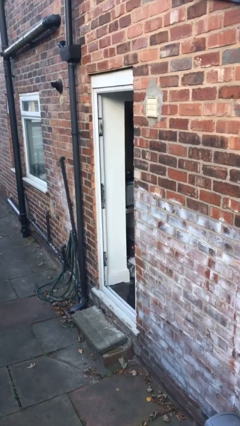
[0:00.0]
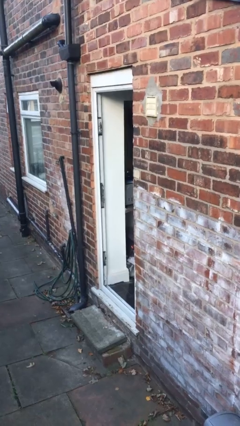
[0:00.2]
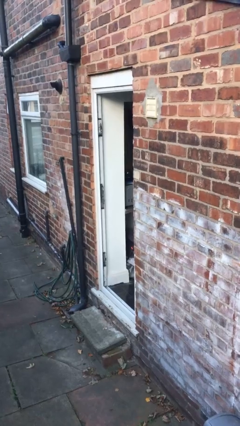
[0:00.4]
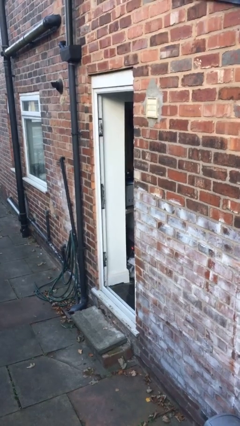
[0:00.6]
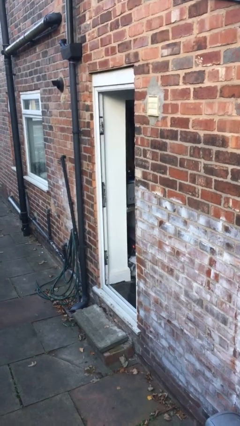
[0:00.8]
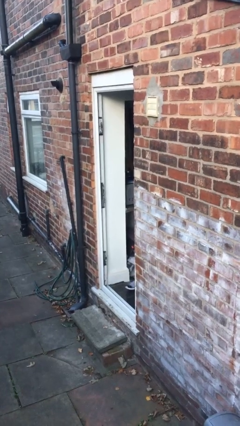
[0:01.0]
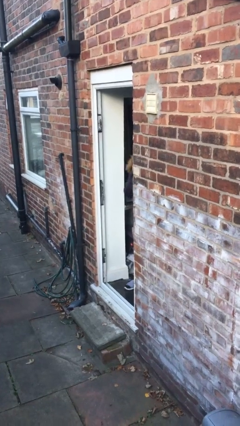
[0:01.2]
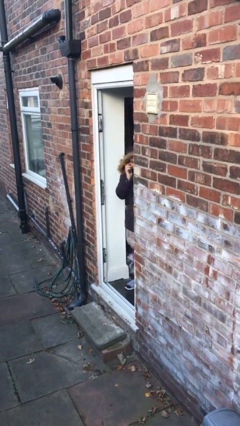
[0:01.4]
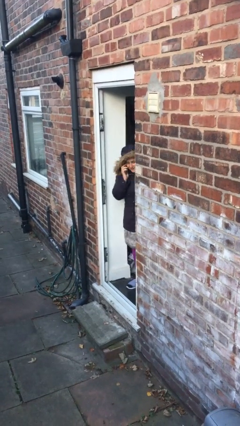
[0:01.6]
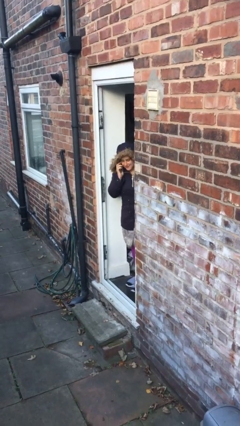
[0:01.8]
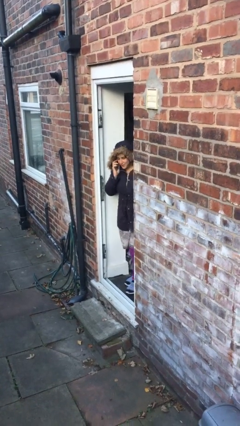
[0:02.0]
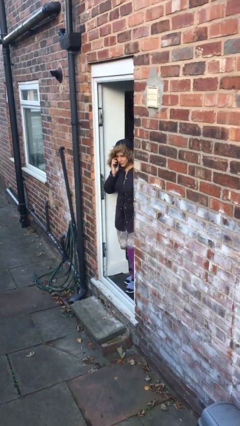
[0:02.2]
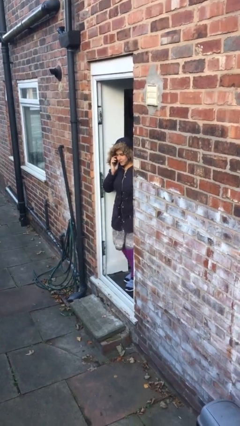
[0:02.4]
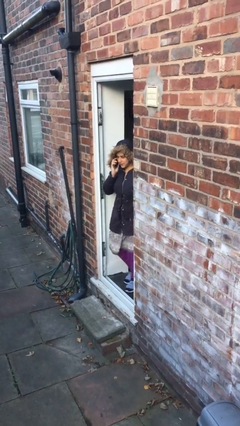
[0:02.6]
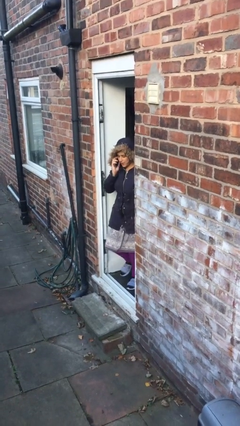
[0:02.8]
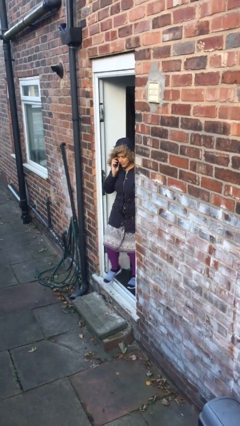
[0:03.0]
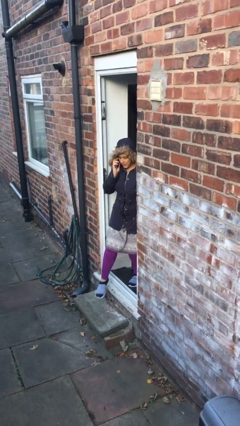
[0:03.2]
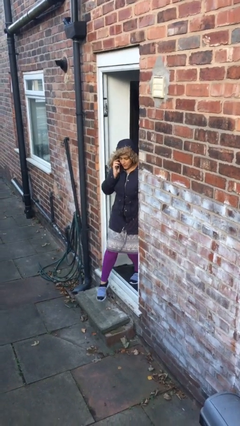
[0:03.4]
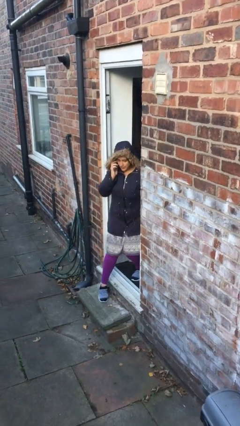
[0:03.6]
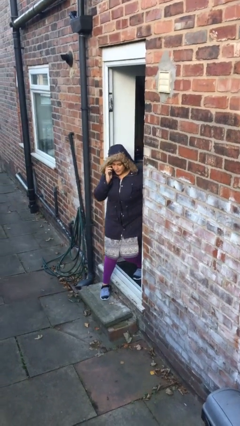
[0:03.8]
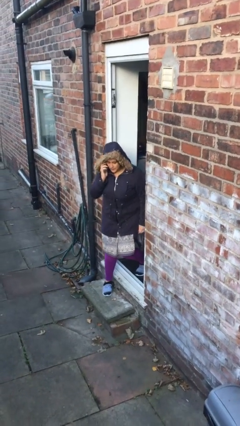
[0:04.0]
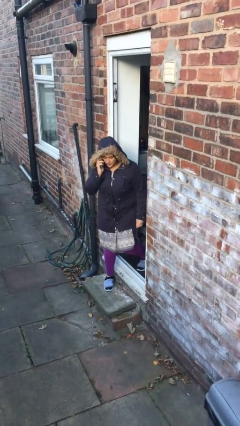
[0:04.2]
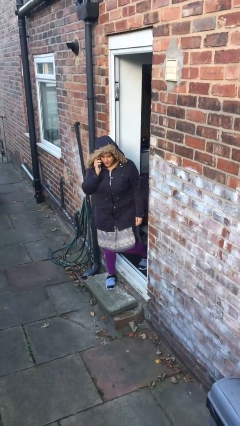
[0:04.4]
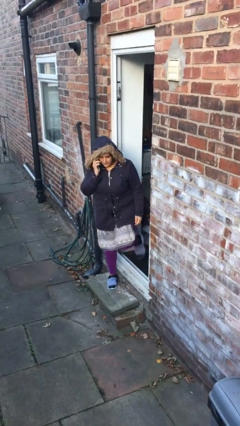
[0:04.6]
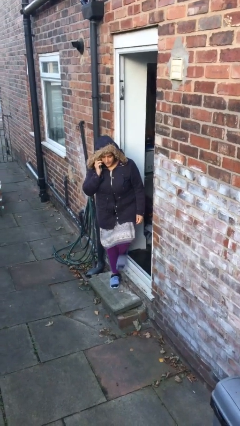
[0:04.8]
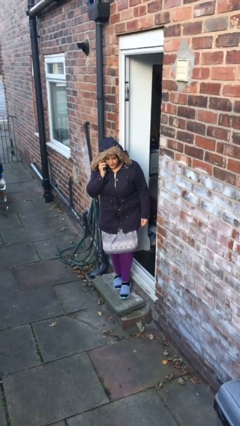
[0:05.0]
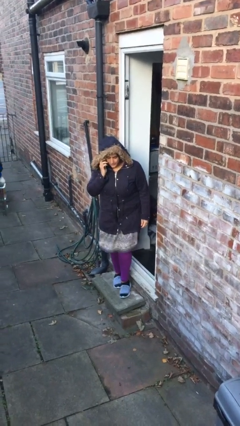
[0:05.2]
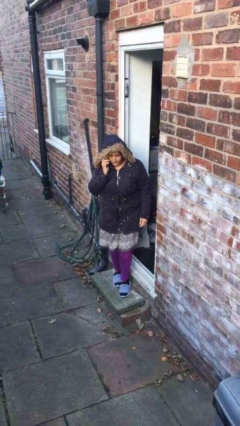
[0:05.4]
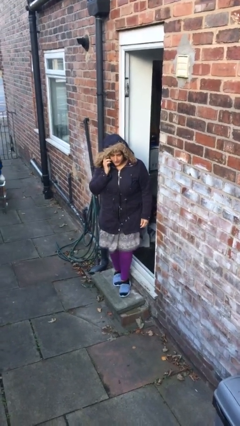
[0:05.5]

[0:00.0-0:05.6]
person enters scene through structure

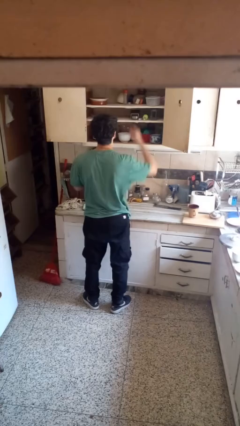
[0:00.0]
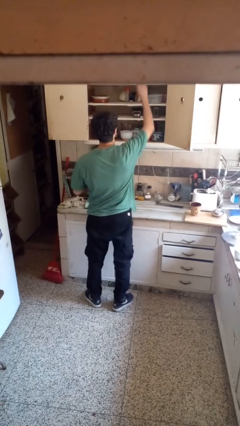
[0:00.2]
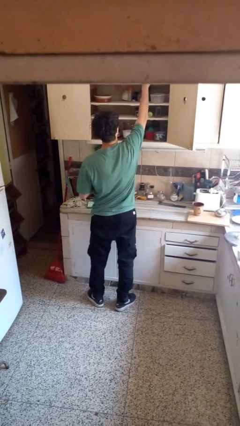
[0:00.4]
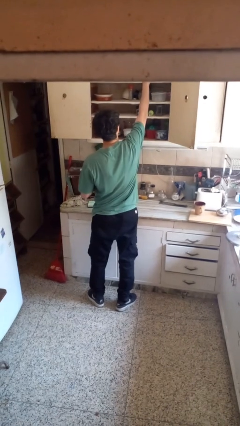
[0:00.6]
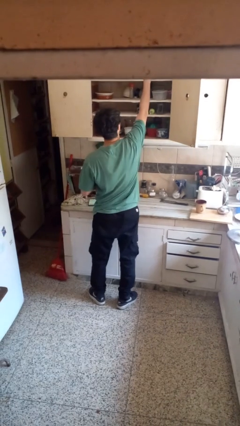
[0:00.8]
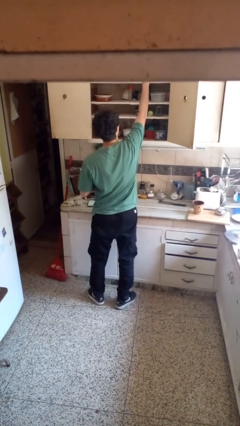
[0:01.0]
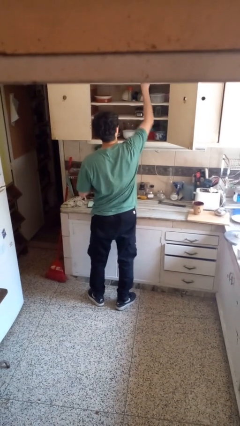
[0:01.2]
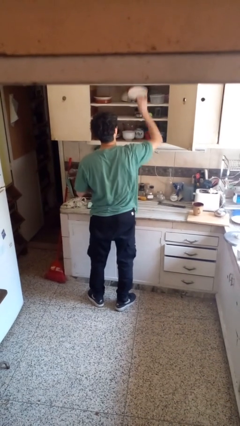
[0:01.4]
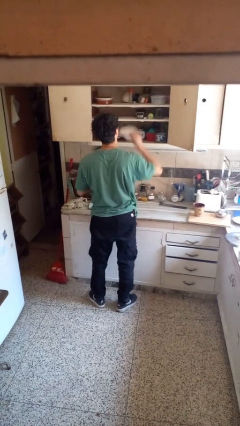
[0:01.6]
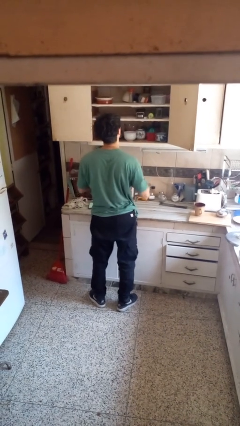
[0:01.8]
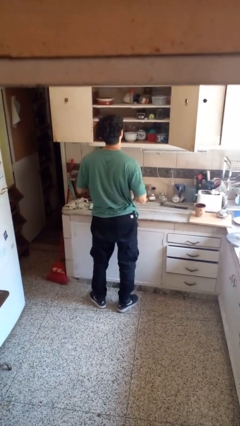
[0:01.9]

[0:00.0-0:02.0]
person takes object from cabinet

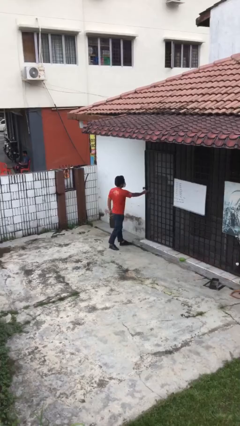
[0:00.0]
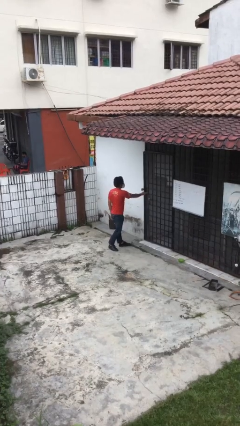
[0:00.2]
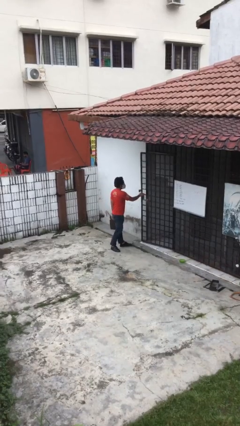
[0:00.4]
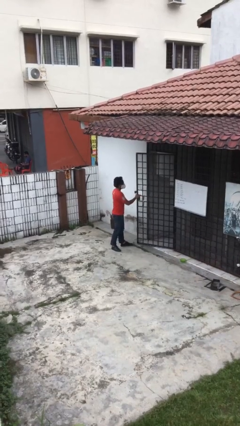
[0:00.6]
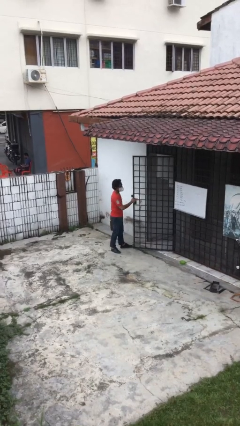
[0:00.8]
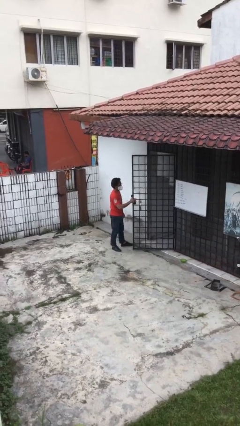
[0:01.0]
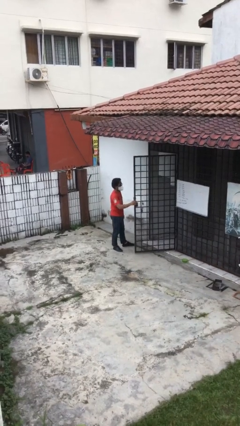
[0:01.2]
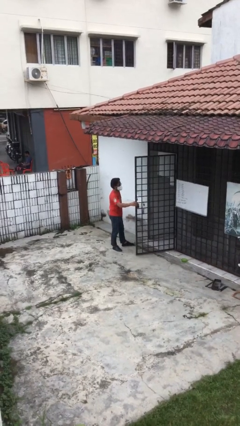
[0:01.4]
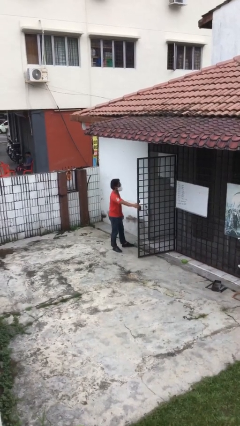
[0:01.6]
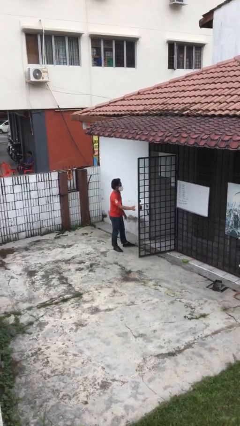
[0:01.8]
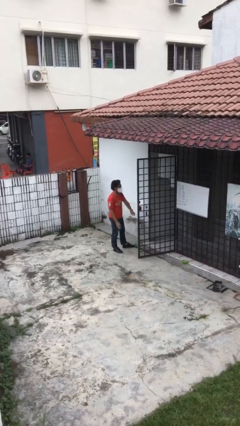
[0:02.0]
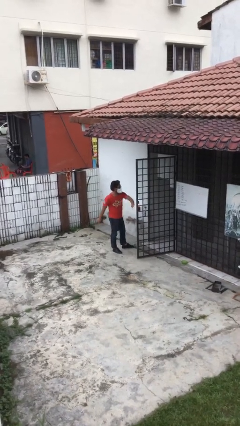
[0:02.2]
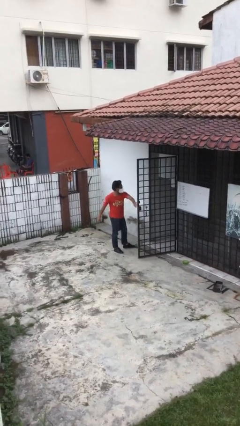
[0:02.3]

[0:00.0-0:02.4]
person opens facility door

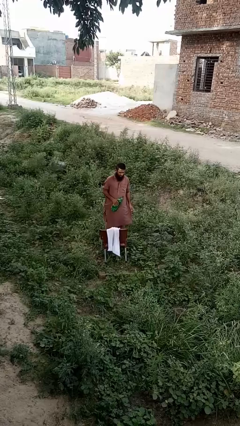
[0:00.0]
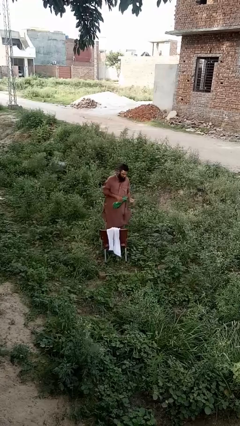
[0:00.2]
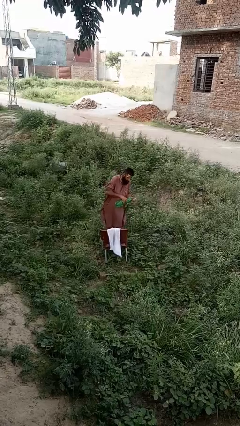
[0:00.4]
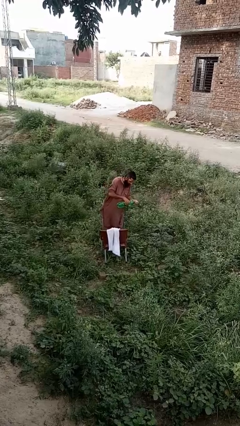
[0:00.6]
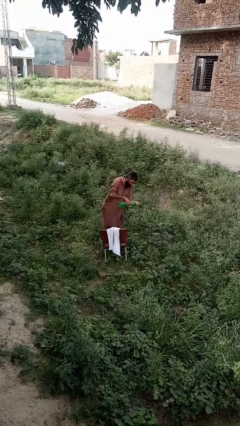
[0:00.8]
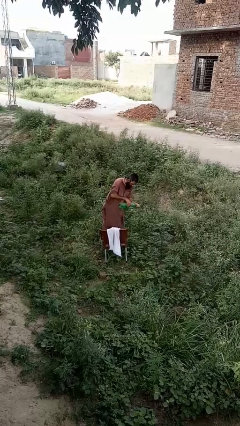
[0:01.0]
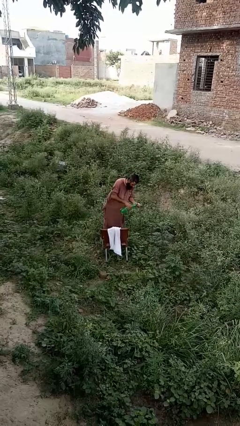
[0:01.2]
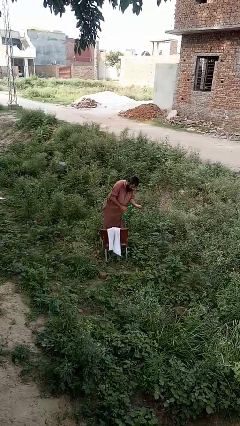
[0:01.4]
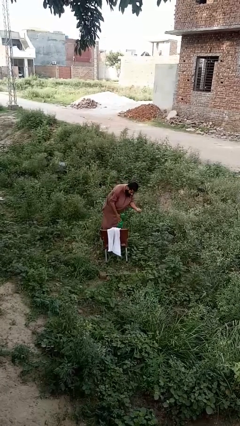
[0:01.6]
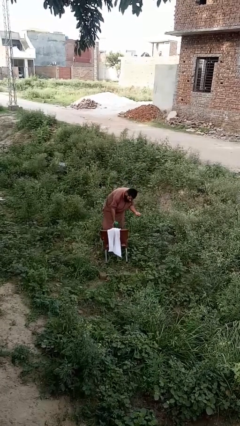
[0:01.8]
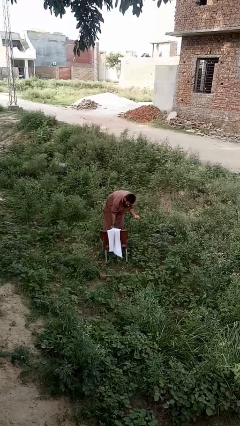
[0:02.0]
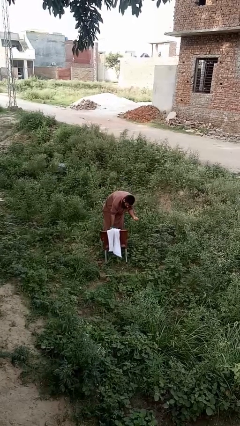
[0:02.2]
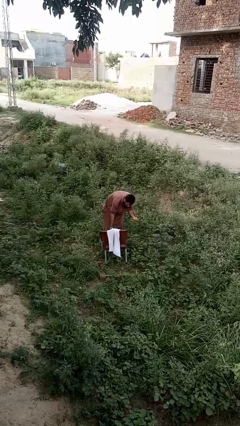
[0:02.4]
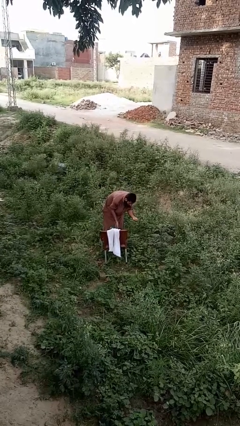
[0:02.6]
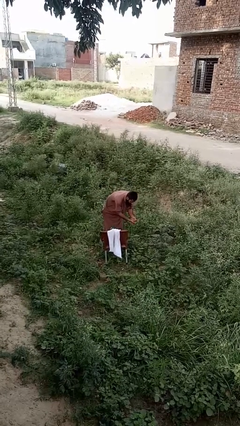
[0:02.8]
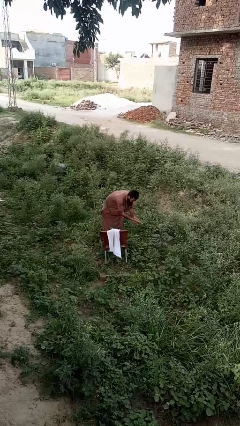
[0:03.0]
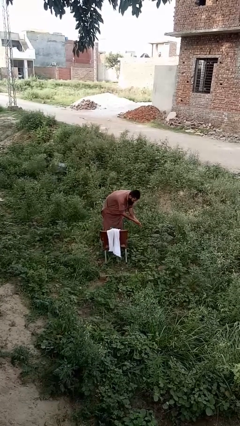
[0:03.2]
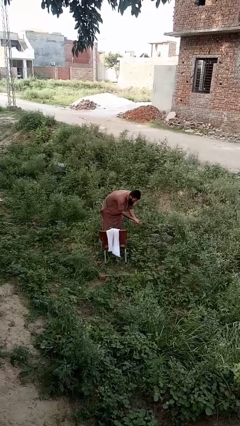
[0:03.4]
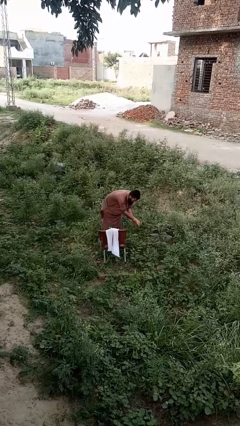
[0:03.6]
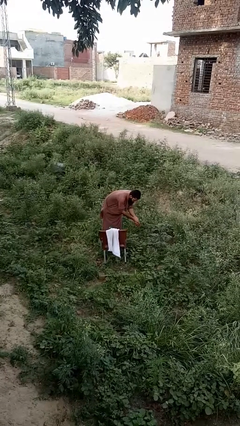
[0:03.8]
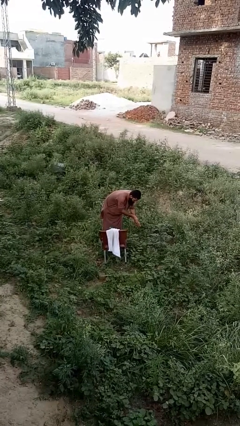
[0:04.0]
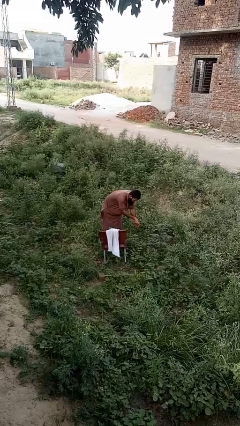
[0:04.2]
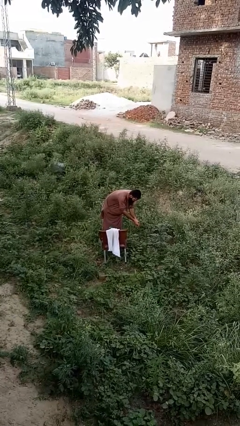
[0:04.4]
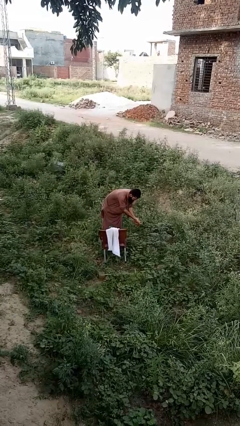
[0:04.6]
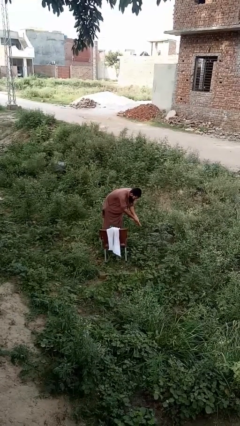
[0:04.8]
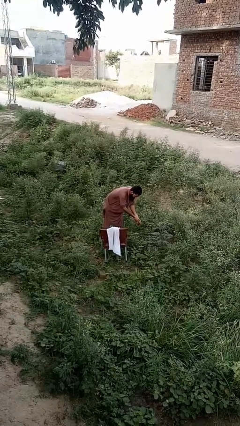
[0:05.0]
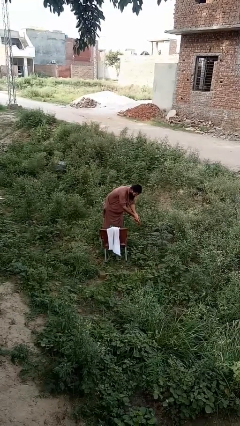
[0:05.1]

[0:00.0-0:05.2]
person washes hands

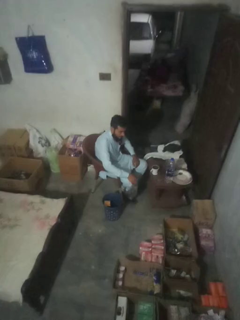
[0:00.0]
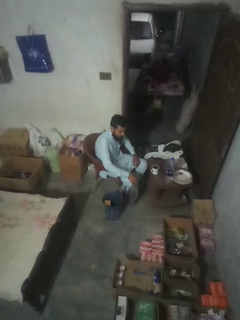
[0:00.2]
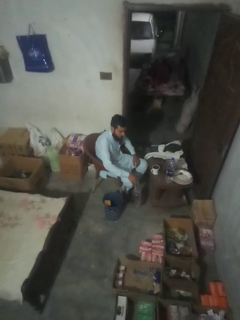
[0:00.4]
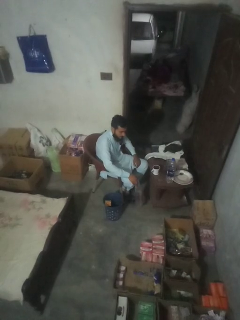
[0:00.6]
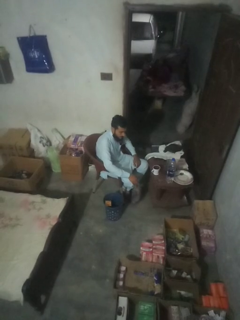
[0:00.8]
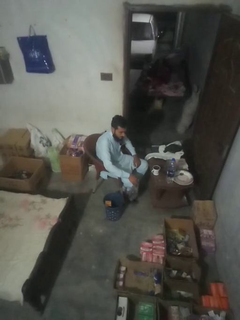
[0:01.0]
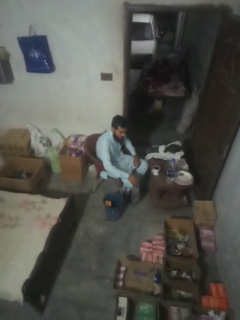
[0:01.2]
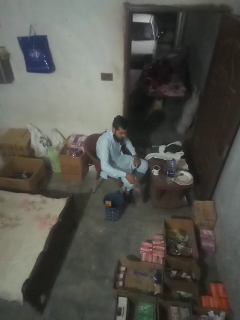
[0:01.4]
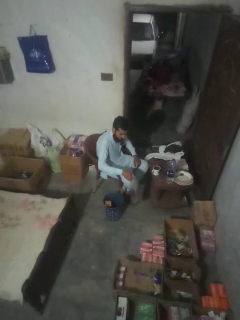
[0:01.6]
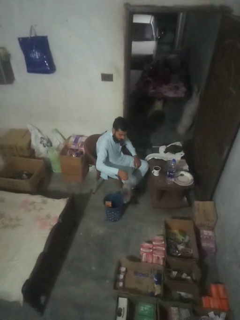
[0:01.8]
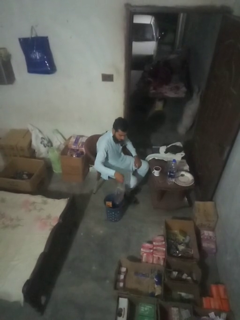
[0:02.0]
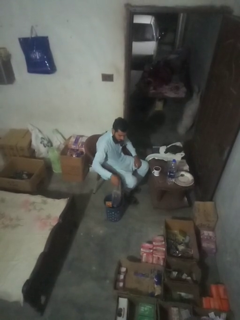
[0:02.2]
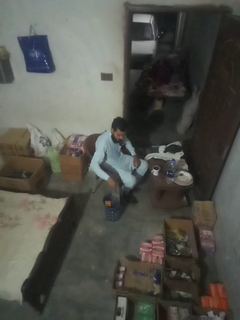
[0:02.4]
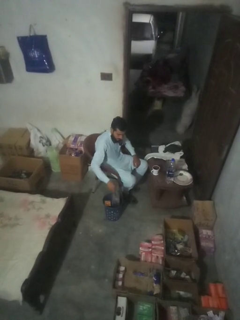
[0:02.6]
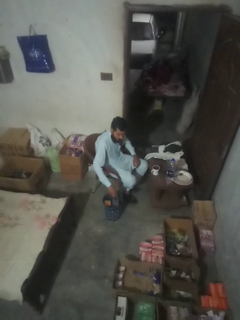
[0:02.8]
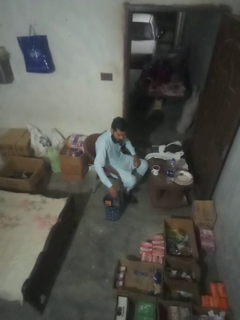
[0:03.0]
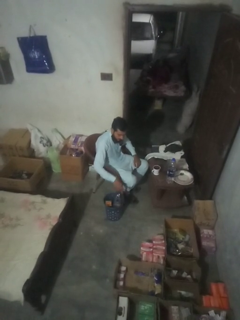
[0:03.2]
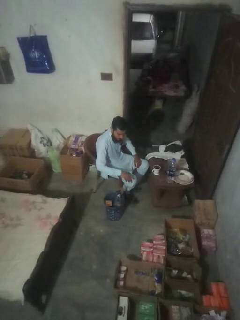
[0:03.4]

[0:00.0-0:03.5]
person removes trashbag from trashcan

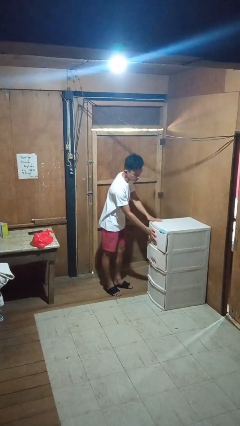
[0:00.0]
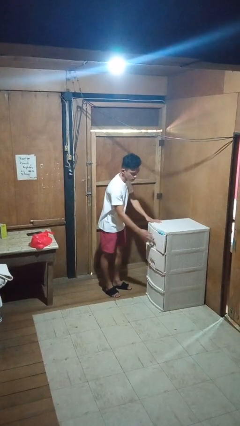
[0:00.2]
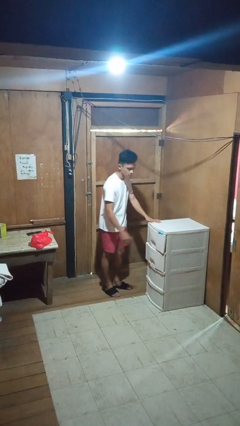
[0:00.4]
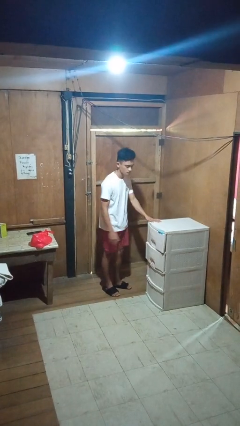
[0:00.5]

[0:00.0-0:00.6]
person closes dresser drawer
